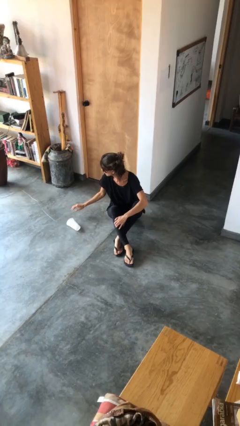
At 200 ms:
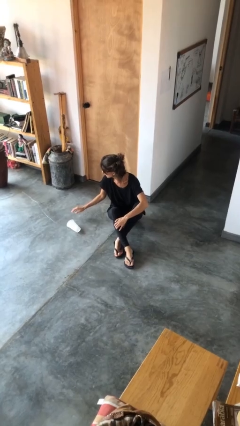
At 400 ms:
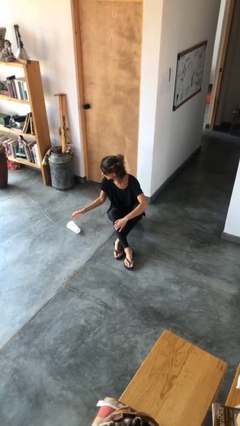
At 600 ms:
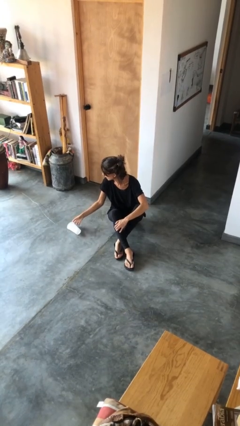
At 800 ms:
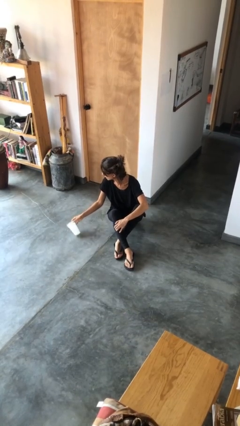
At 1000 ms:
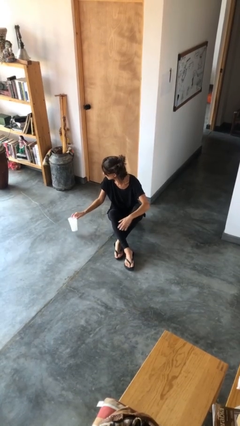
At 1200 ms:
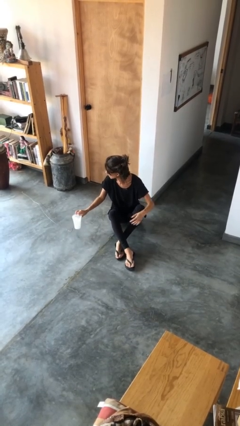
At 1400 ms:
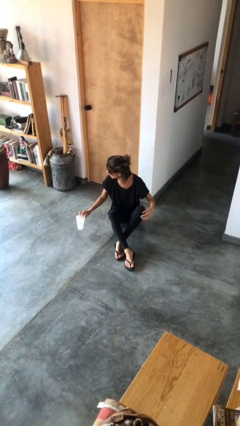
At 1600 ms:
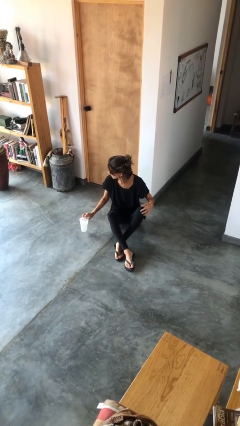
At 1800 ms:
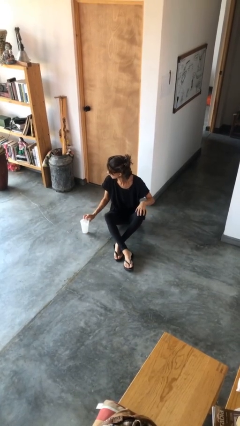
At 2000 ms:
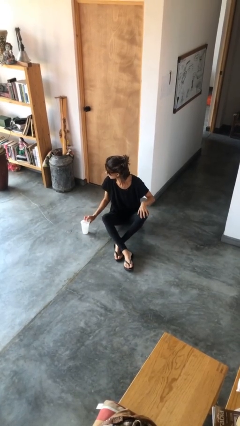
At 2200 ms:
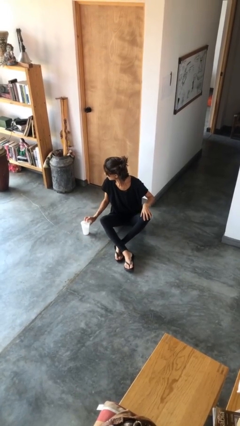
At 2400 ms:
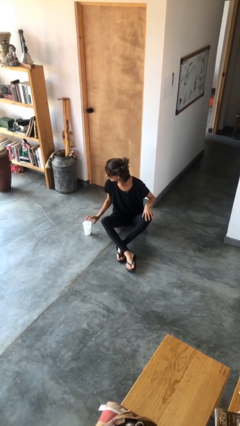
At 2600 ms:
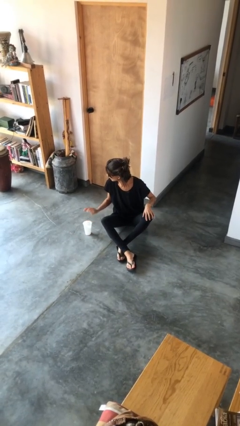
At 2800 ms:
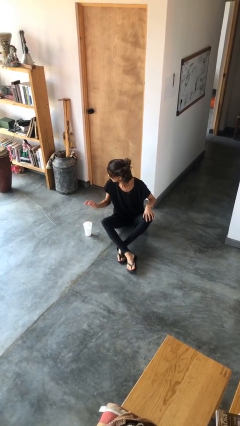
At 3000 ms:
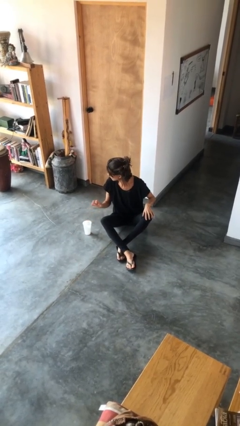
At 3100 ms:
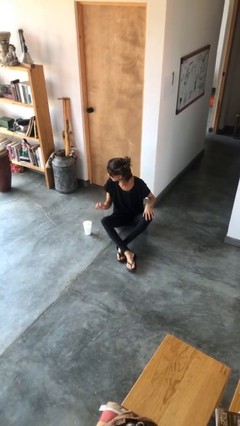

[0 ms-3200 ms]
person sets upright glass

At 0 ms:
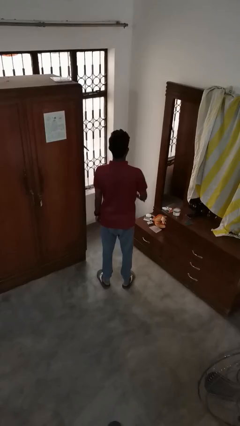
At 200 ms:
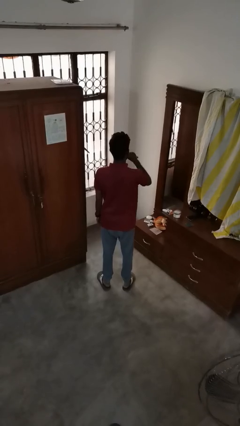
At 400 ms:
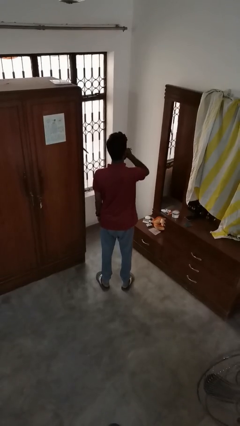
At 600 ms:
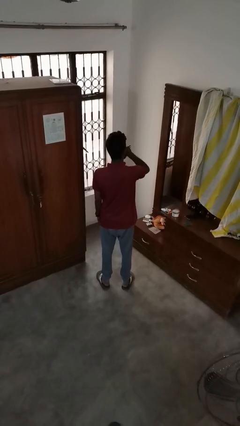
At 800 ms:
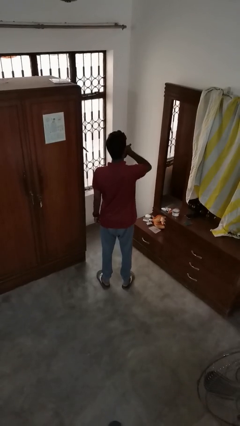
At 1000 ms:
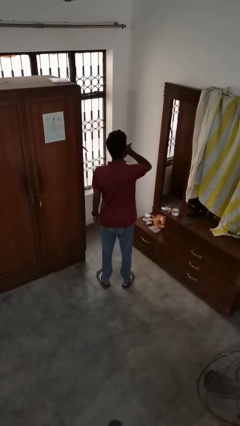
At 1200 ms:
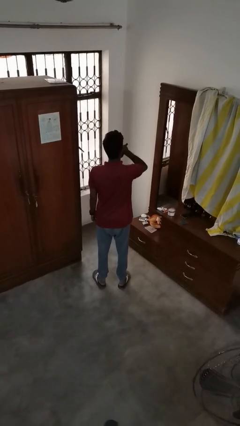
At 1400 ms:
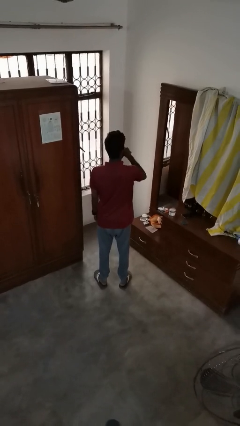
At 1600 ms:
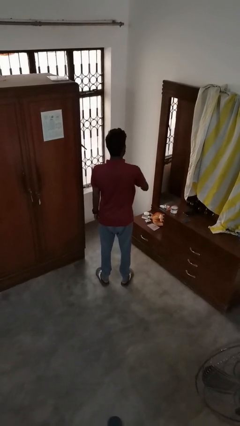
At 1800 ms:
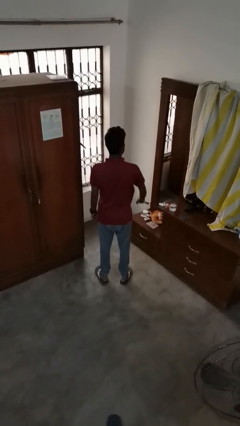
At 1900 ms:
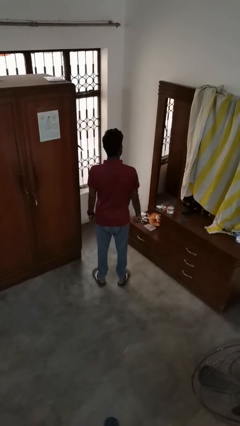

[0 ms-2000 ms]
person vapes

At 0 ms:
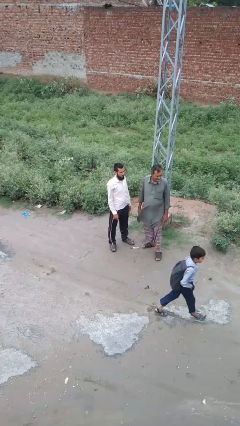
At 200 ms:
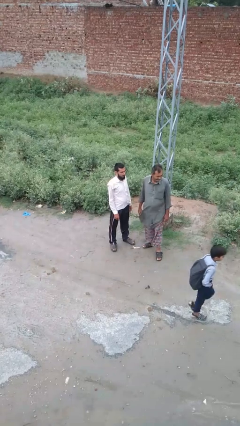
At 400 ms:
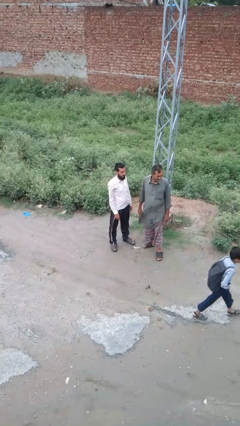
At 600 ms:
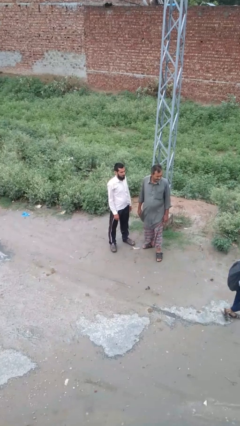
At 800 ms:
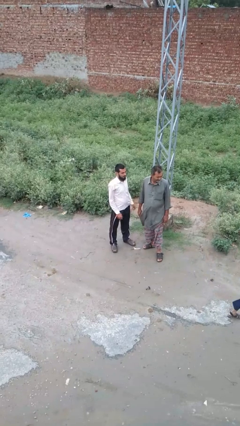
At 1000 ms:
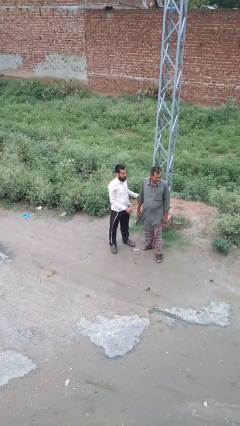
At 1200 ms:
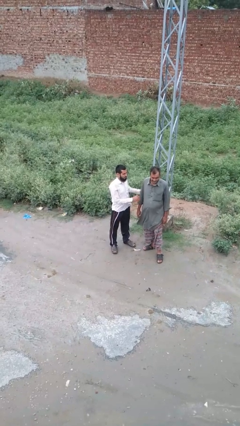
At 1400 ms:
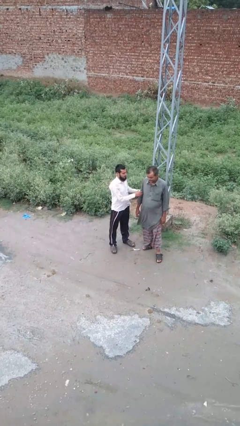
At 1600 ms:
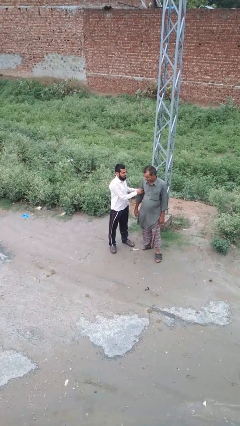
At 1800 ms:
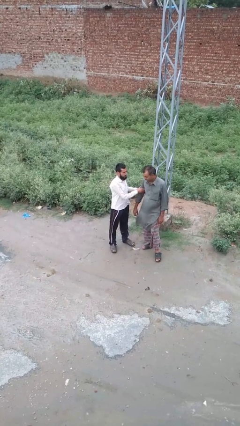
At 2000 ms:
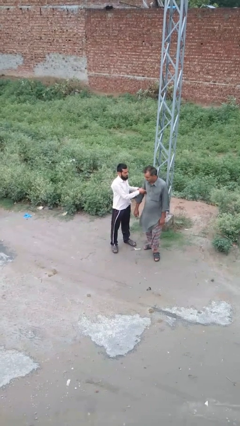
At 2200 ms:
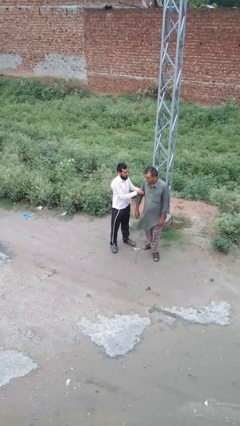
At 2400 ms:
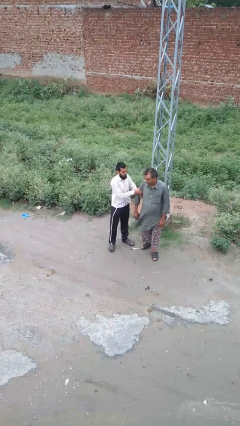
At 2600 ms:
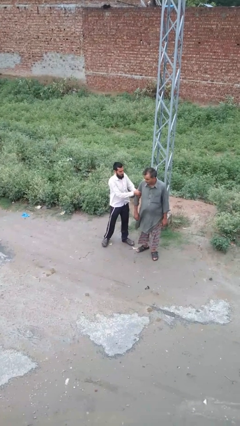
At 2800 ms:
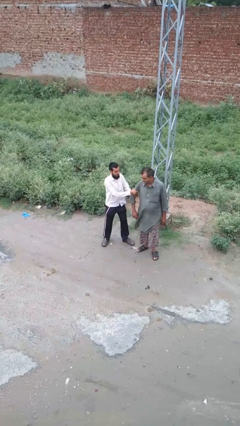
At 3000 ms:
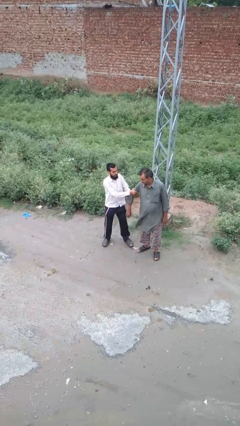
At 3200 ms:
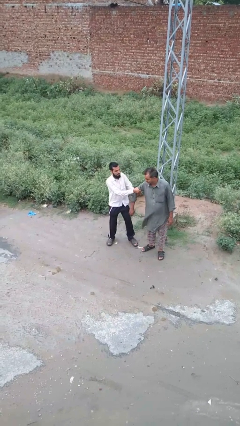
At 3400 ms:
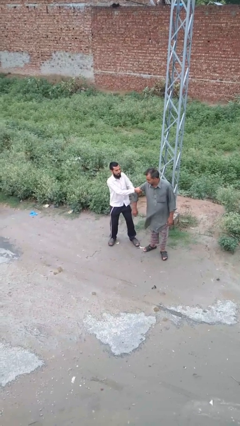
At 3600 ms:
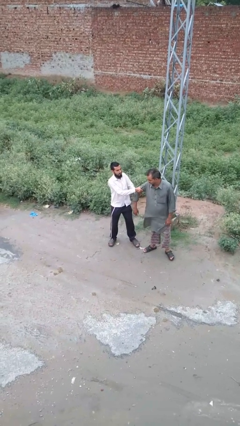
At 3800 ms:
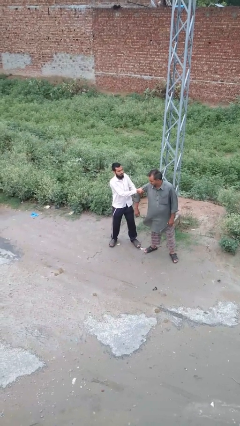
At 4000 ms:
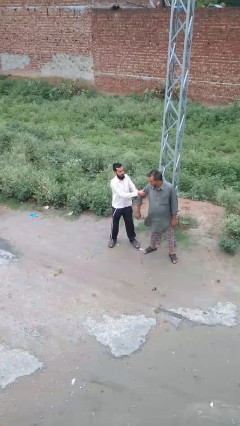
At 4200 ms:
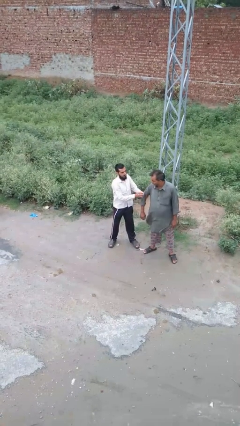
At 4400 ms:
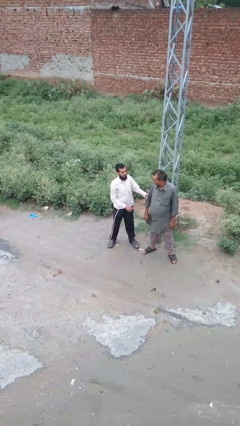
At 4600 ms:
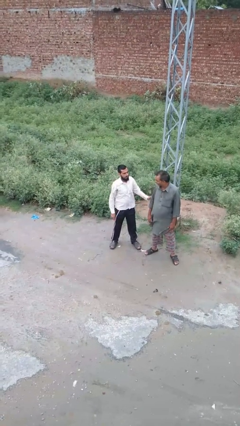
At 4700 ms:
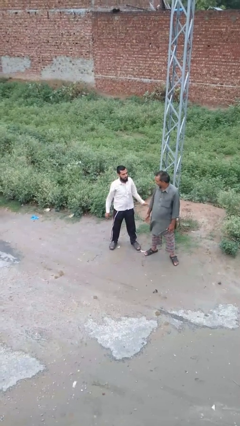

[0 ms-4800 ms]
person grabs person by bicep

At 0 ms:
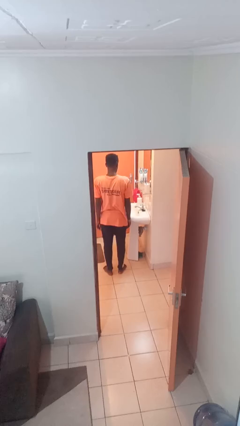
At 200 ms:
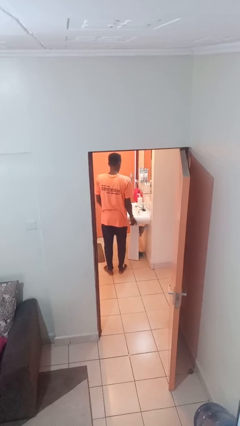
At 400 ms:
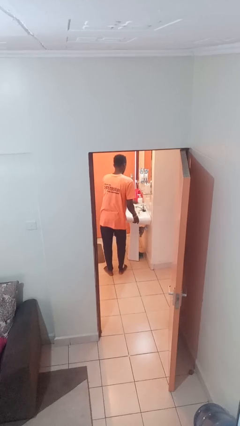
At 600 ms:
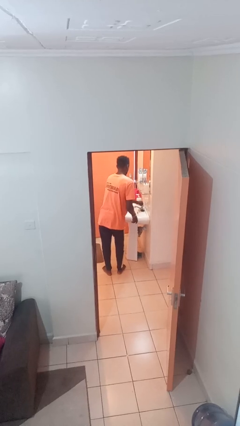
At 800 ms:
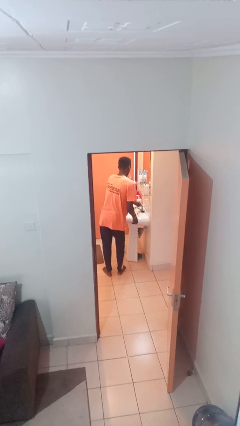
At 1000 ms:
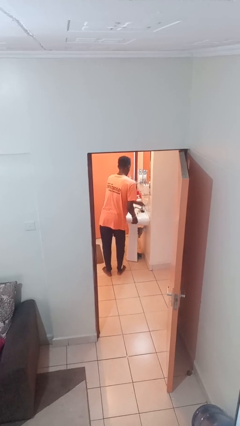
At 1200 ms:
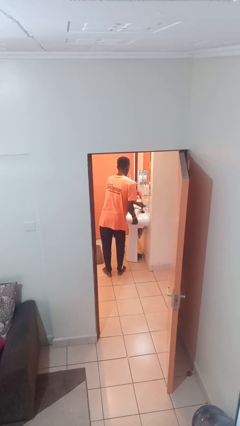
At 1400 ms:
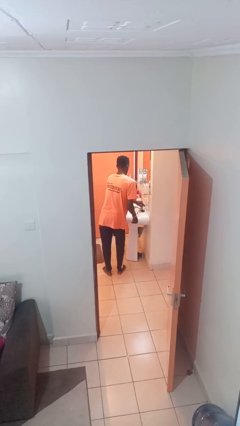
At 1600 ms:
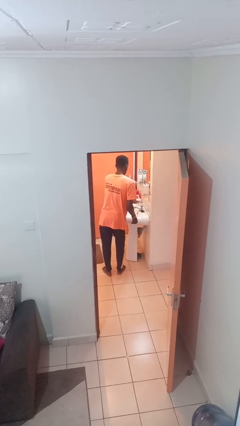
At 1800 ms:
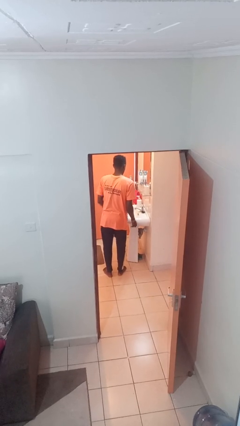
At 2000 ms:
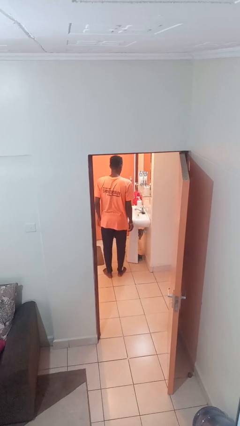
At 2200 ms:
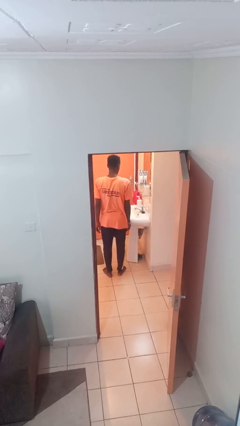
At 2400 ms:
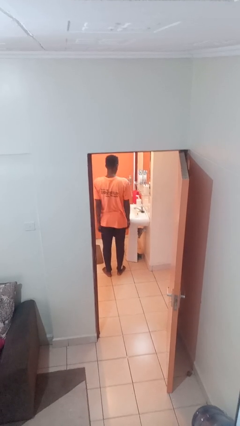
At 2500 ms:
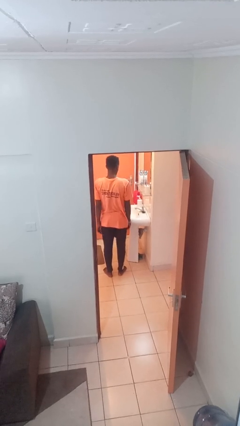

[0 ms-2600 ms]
person turns off faucet

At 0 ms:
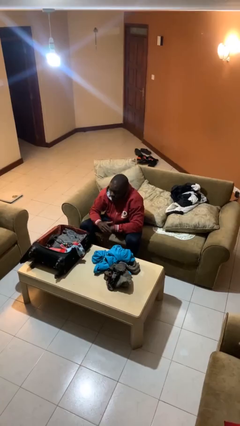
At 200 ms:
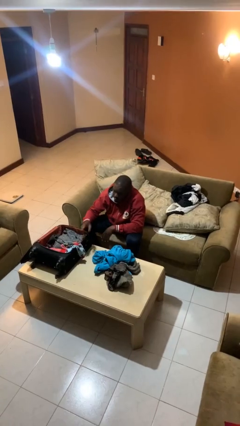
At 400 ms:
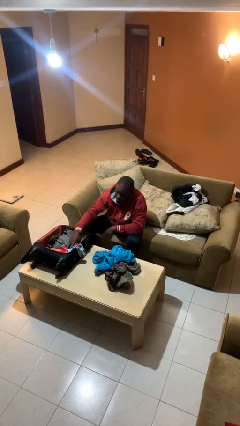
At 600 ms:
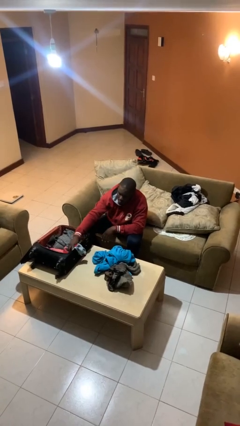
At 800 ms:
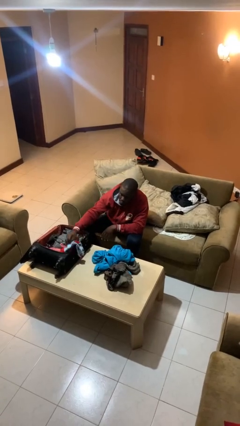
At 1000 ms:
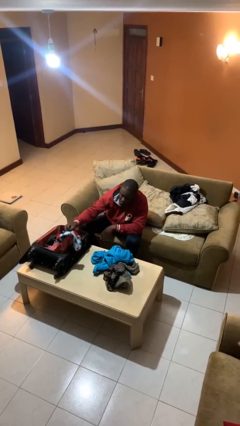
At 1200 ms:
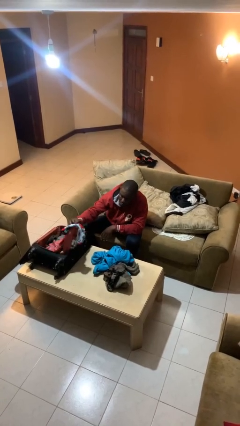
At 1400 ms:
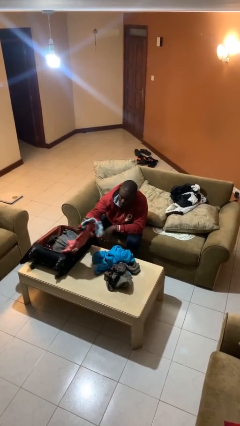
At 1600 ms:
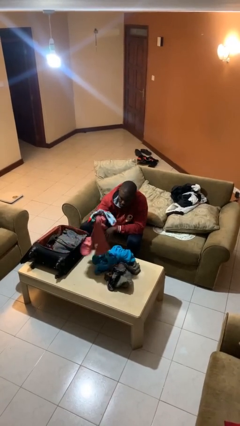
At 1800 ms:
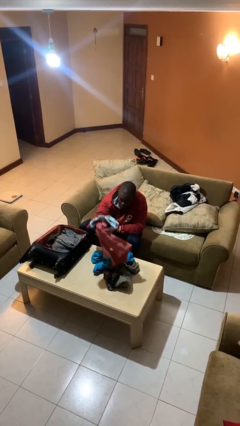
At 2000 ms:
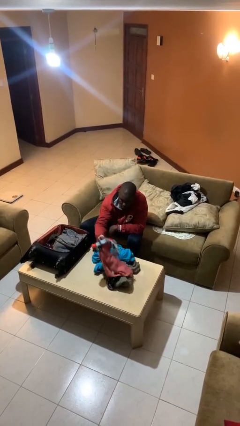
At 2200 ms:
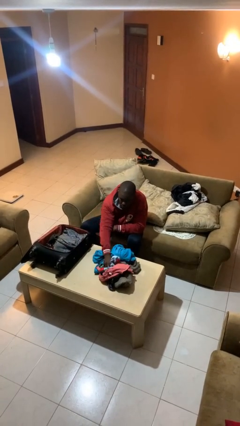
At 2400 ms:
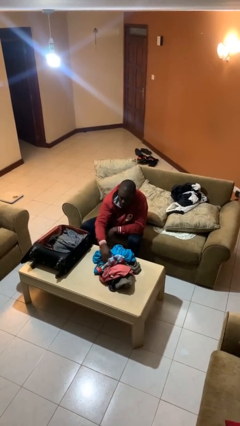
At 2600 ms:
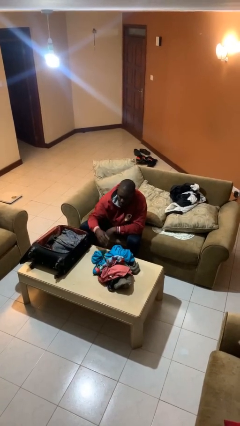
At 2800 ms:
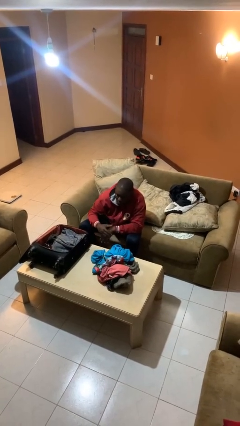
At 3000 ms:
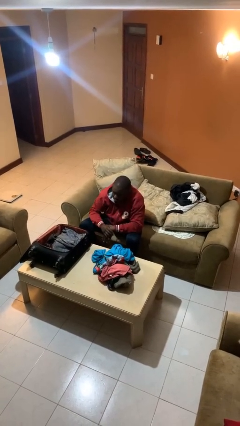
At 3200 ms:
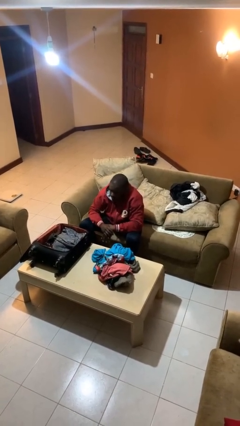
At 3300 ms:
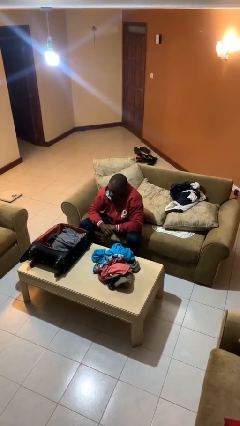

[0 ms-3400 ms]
person unloads clothes from suitcase

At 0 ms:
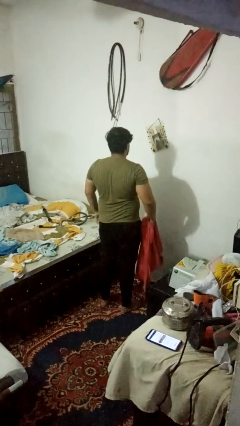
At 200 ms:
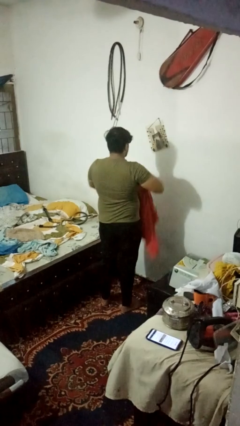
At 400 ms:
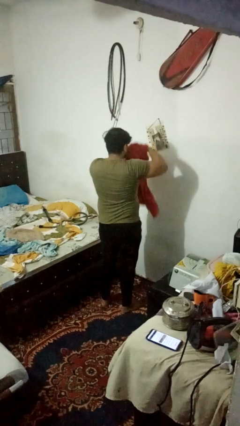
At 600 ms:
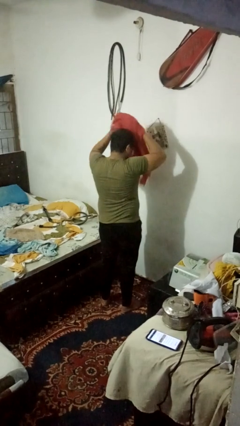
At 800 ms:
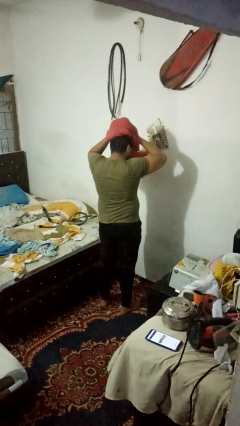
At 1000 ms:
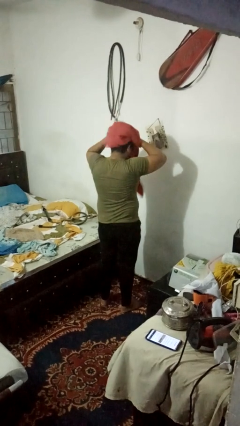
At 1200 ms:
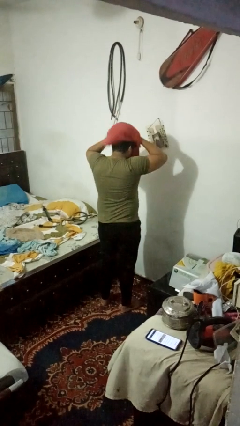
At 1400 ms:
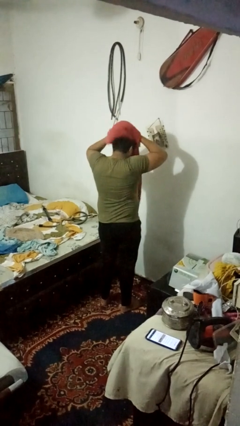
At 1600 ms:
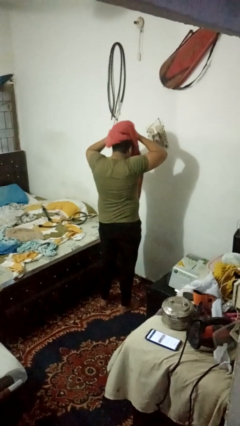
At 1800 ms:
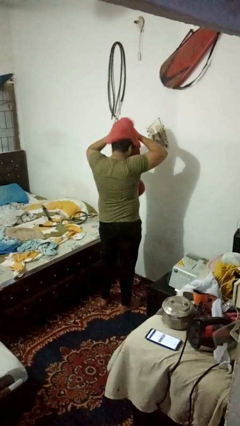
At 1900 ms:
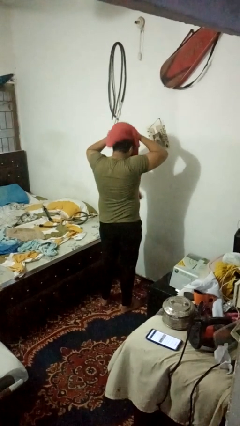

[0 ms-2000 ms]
person dries hair with towel
